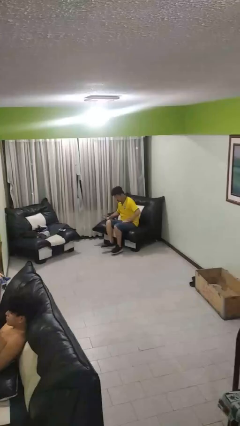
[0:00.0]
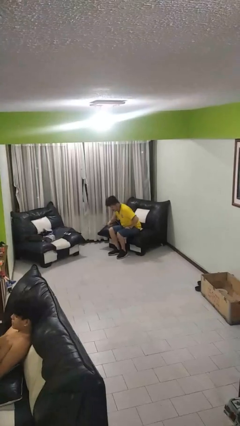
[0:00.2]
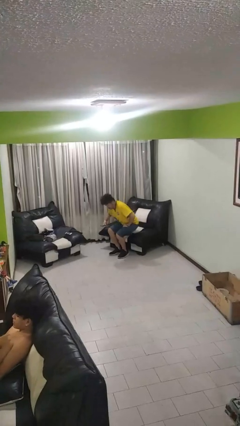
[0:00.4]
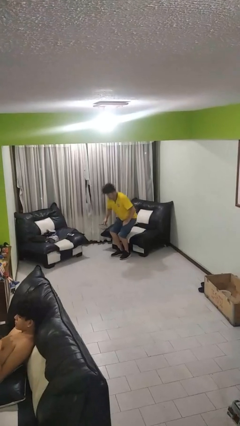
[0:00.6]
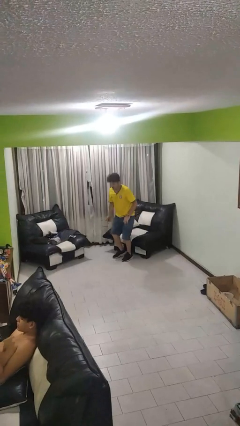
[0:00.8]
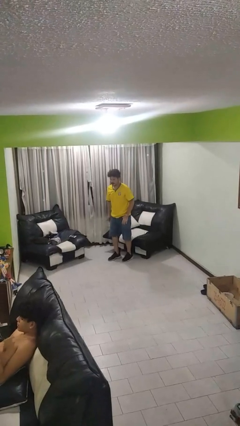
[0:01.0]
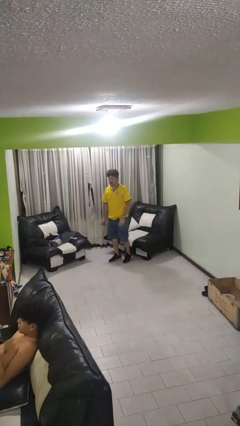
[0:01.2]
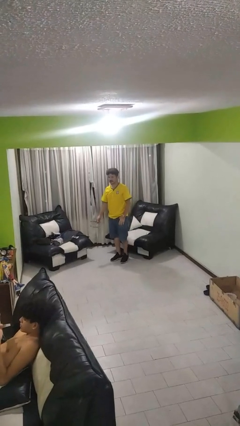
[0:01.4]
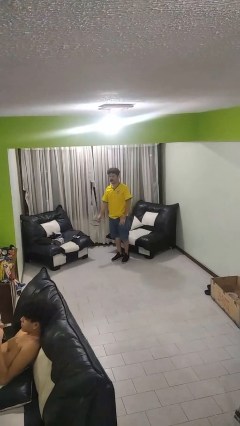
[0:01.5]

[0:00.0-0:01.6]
person stands up

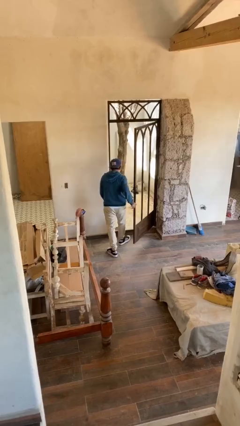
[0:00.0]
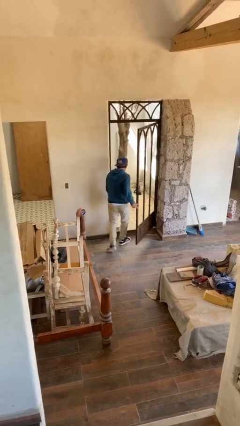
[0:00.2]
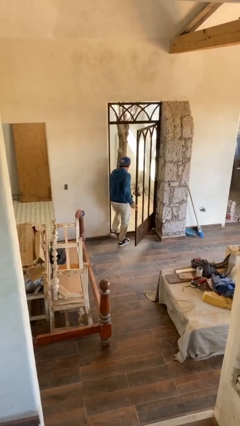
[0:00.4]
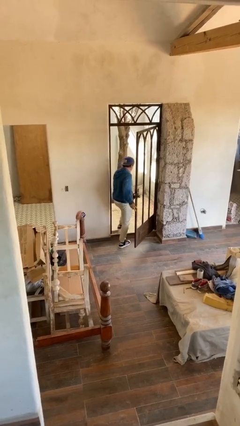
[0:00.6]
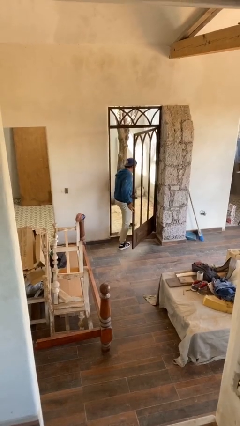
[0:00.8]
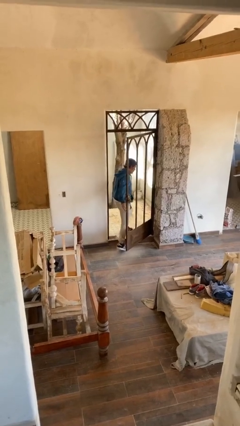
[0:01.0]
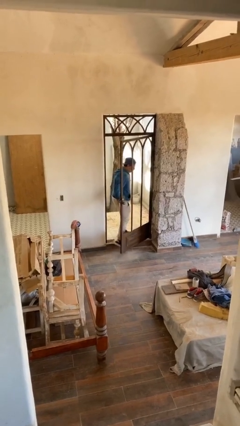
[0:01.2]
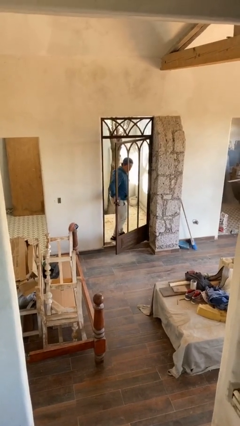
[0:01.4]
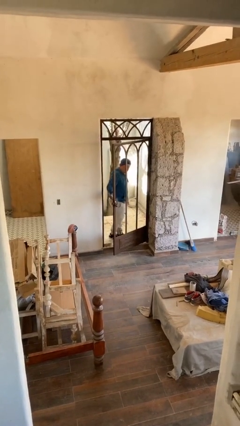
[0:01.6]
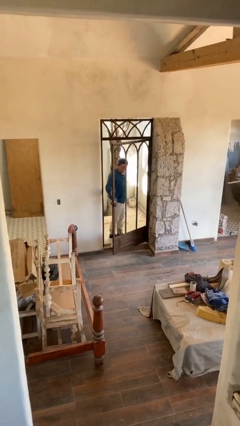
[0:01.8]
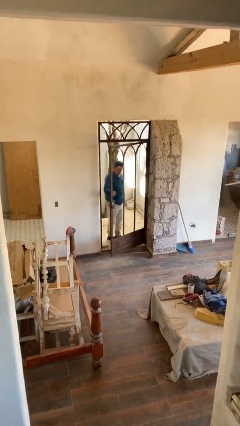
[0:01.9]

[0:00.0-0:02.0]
person exits scene through structure

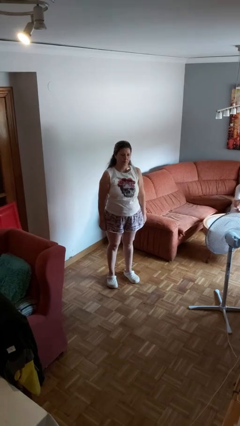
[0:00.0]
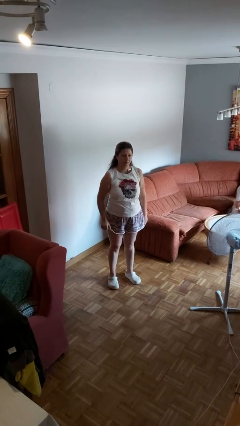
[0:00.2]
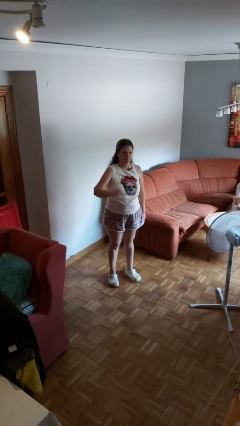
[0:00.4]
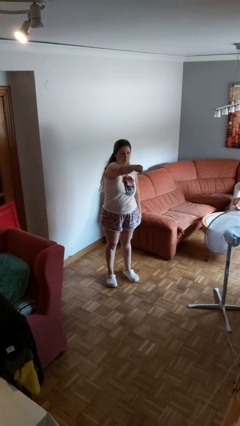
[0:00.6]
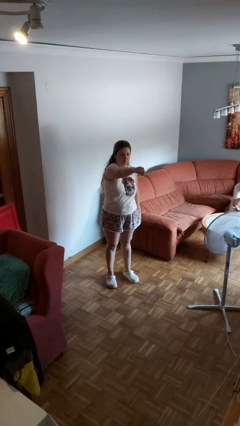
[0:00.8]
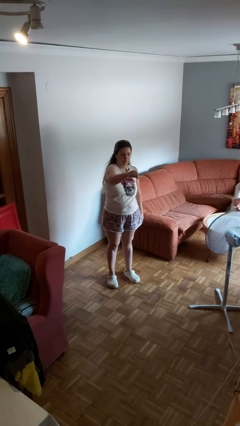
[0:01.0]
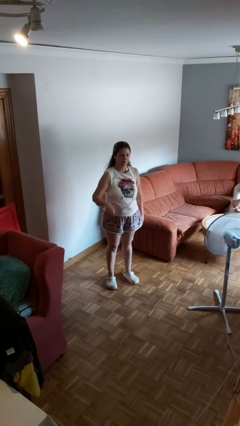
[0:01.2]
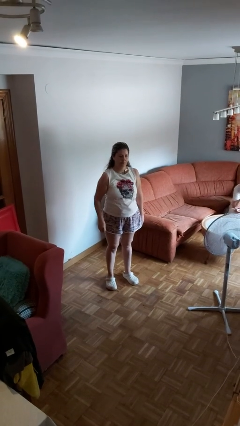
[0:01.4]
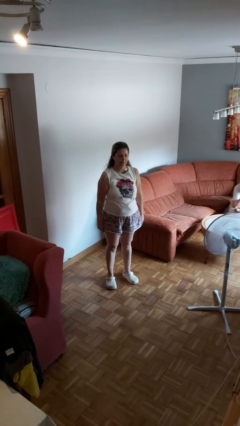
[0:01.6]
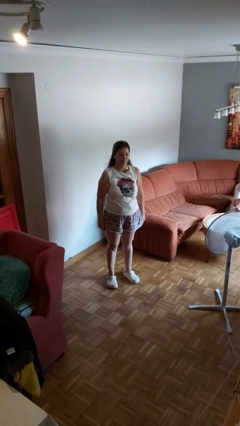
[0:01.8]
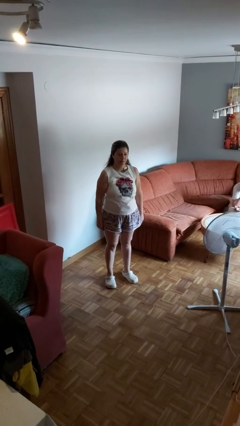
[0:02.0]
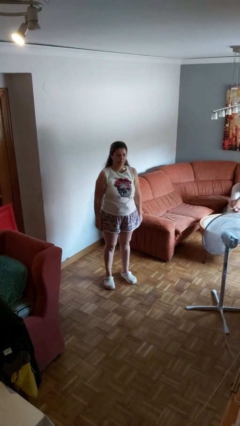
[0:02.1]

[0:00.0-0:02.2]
person punches

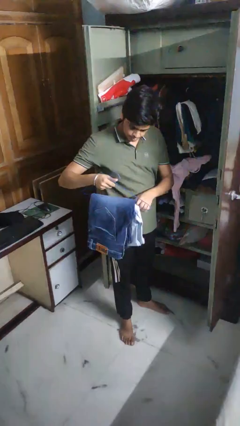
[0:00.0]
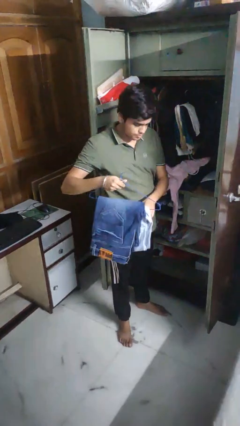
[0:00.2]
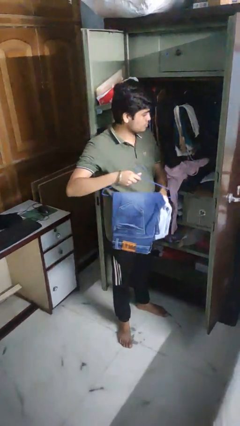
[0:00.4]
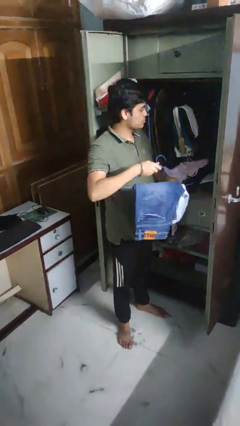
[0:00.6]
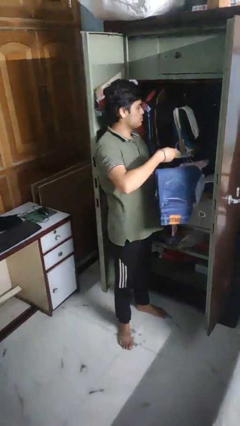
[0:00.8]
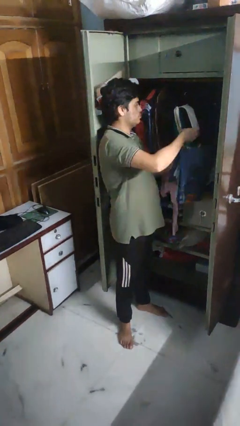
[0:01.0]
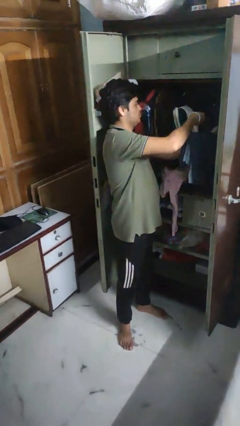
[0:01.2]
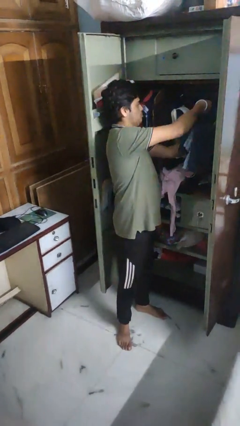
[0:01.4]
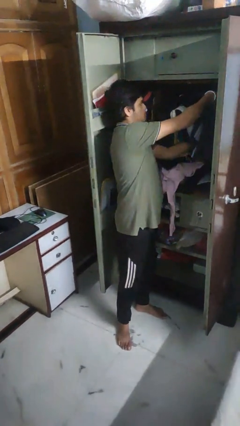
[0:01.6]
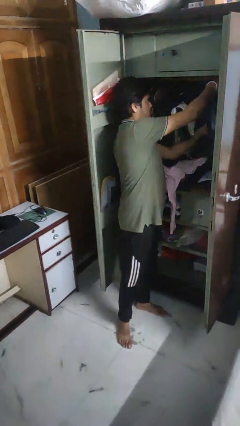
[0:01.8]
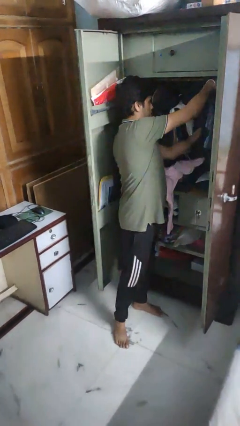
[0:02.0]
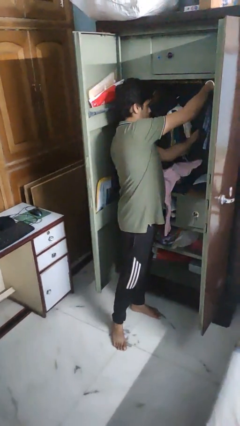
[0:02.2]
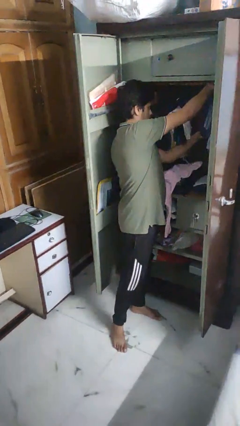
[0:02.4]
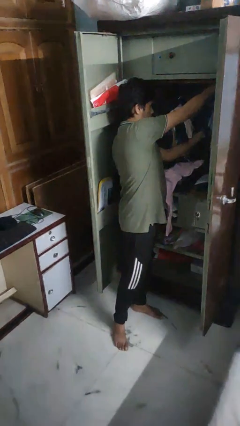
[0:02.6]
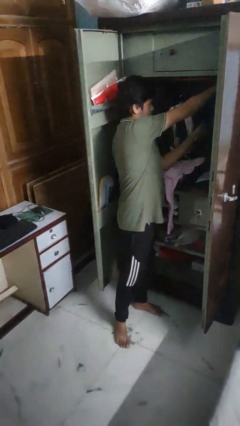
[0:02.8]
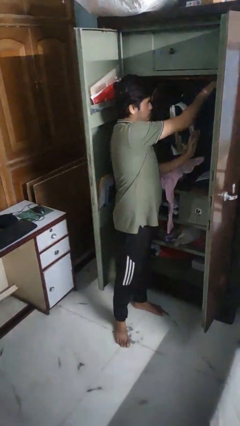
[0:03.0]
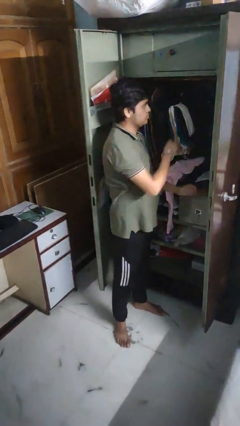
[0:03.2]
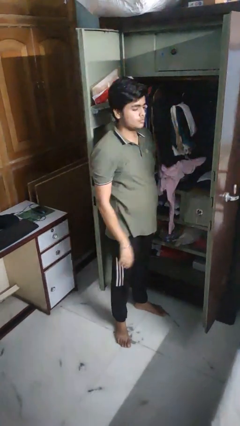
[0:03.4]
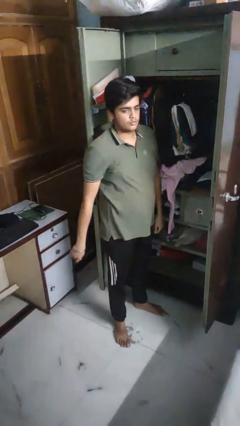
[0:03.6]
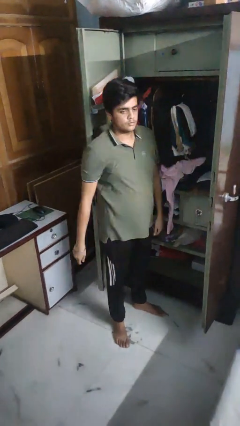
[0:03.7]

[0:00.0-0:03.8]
person puts clothes into closet

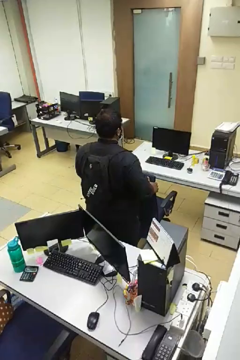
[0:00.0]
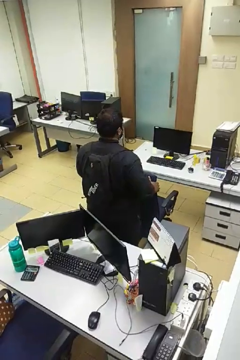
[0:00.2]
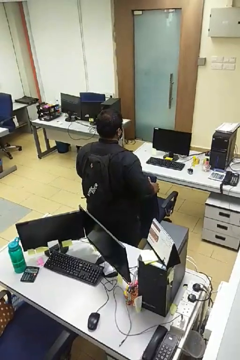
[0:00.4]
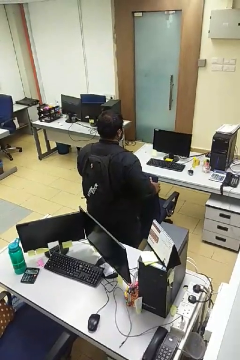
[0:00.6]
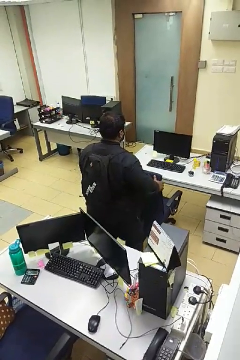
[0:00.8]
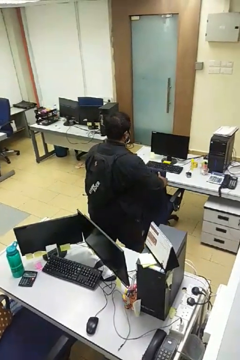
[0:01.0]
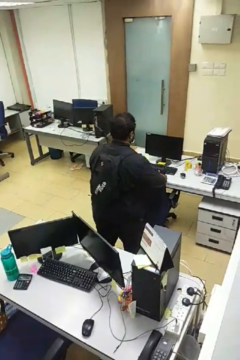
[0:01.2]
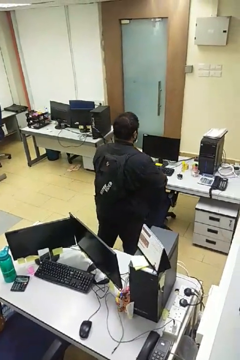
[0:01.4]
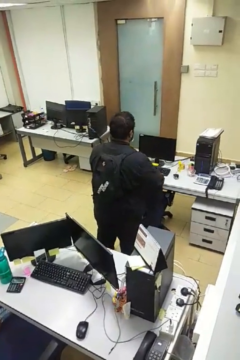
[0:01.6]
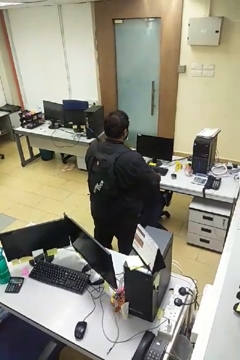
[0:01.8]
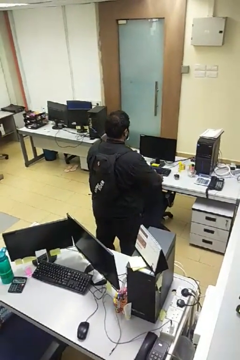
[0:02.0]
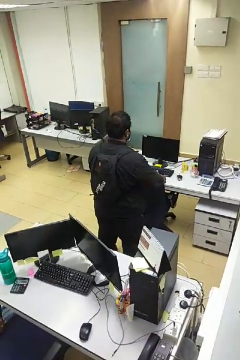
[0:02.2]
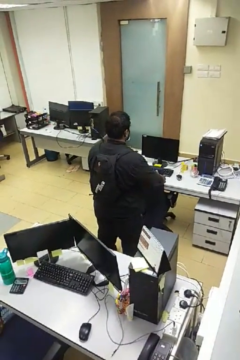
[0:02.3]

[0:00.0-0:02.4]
person pushes in chair

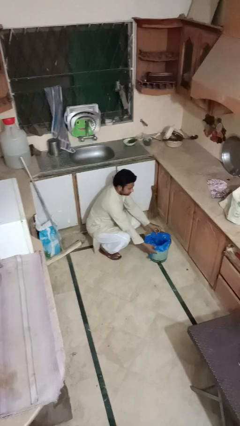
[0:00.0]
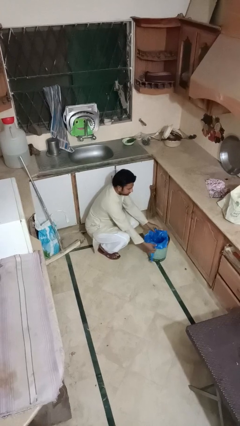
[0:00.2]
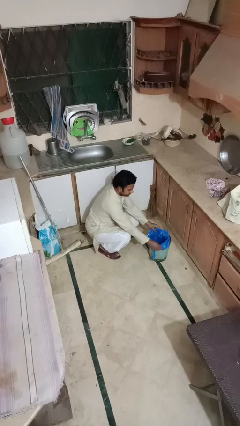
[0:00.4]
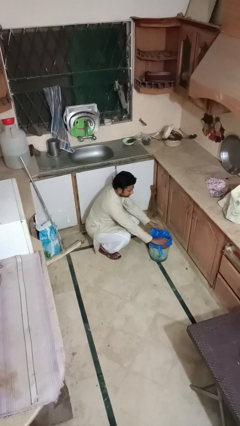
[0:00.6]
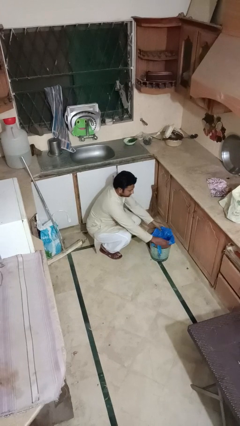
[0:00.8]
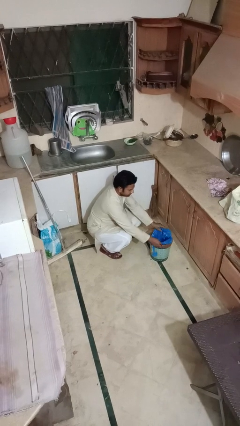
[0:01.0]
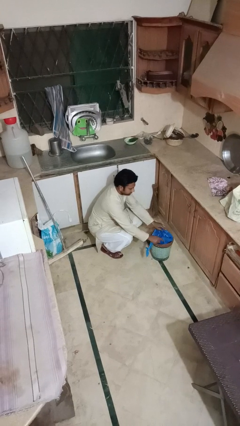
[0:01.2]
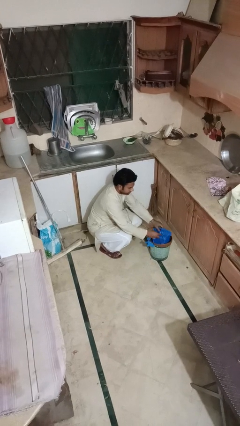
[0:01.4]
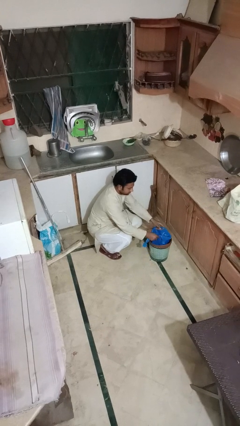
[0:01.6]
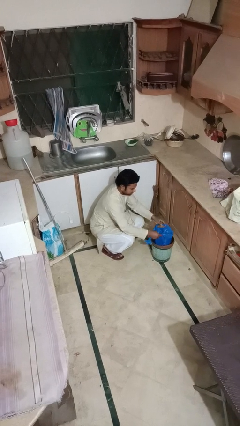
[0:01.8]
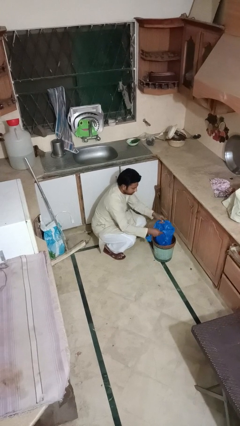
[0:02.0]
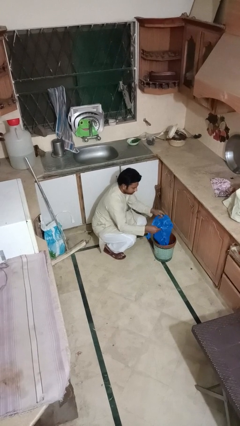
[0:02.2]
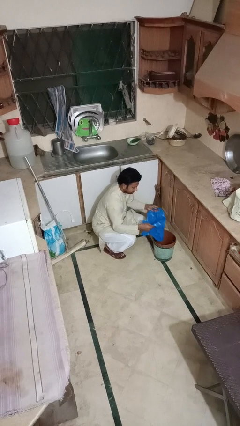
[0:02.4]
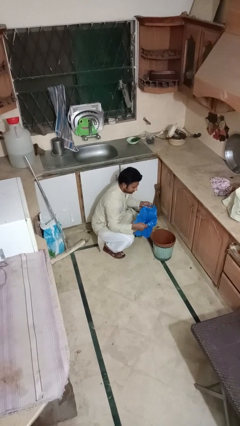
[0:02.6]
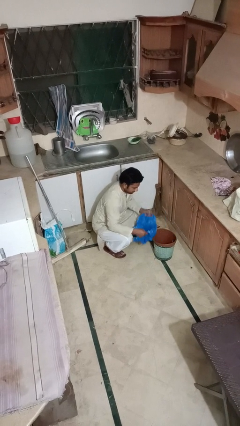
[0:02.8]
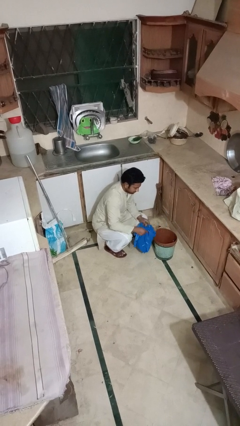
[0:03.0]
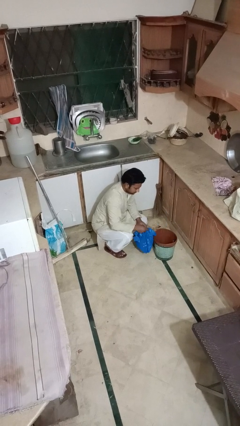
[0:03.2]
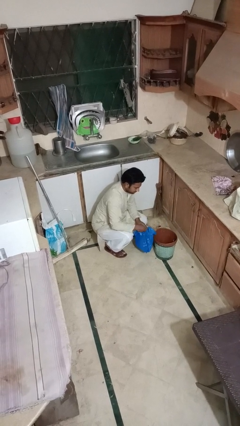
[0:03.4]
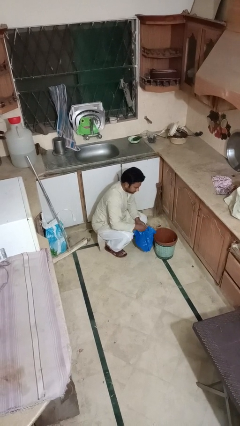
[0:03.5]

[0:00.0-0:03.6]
person removes trashbag from trashcan

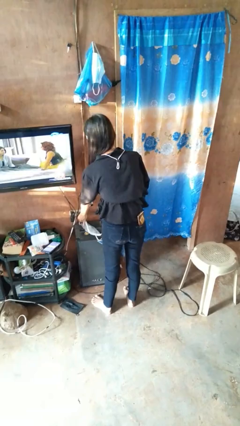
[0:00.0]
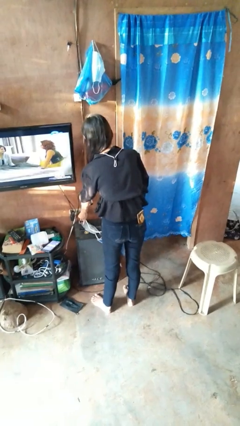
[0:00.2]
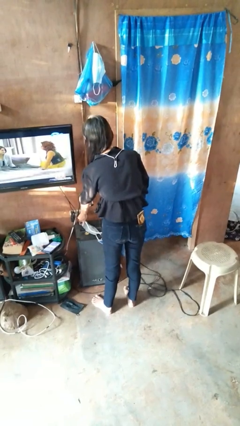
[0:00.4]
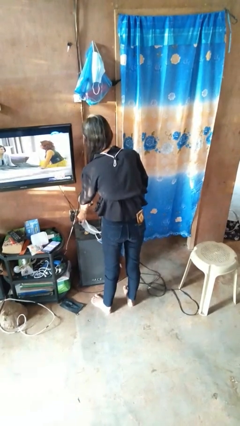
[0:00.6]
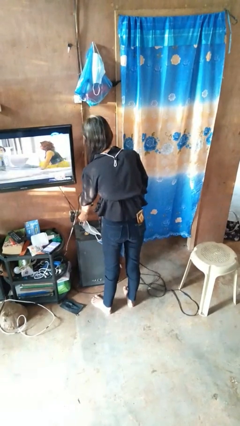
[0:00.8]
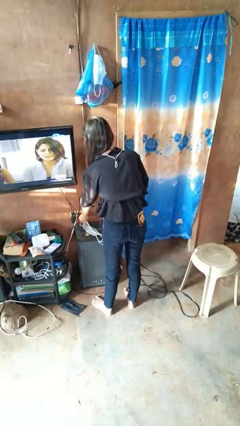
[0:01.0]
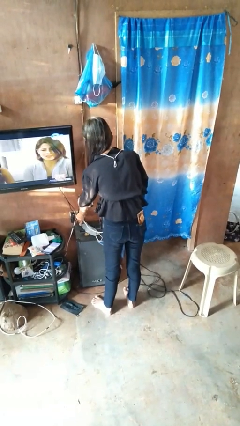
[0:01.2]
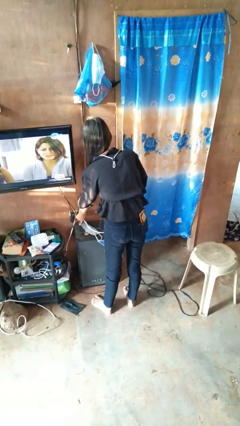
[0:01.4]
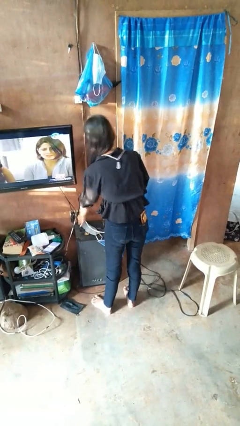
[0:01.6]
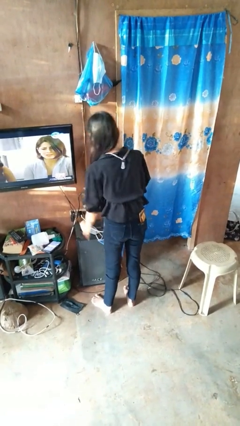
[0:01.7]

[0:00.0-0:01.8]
person plugs into electrical socket

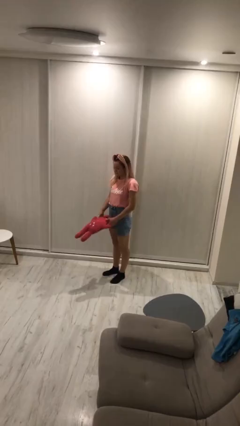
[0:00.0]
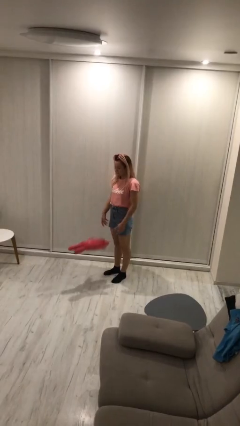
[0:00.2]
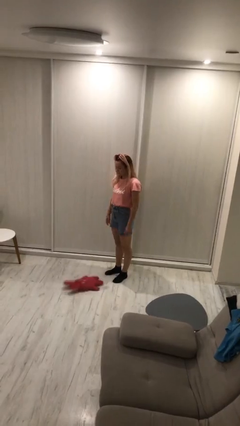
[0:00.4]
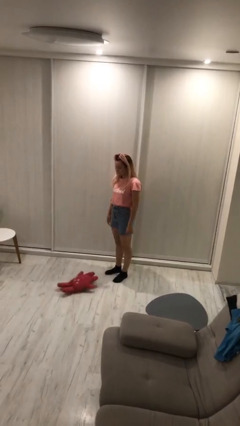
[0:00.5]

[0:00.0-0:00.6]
person throws object to ground
